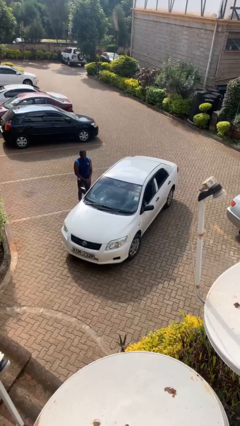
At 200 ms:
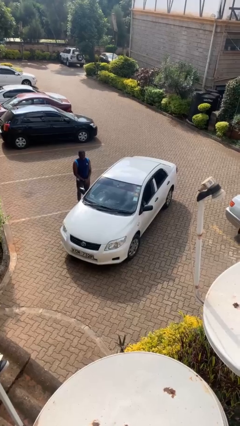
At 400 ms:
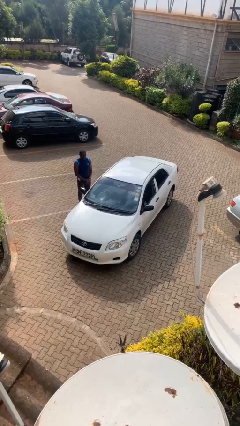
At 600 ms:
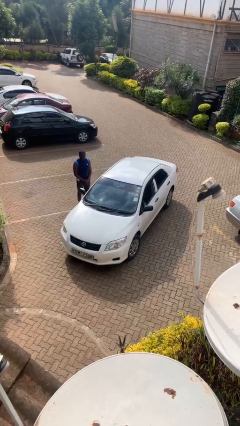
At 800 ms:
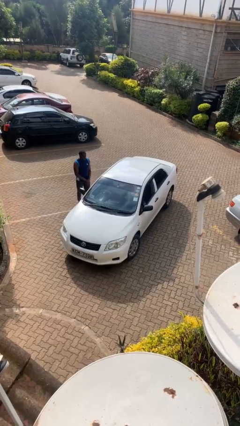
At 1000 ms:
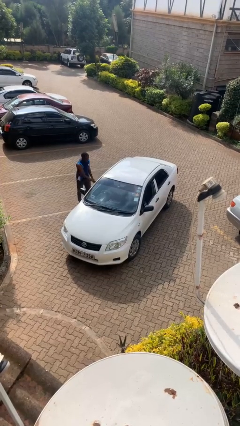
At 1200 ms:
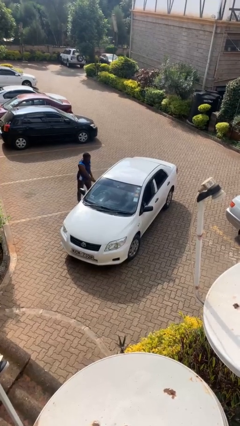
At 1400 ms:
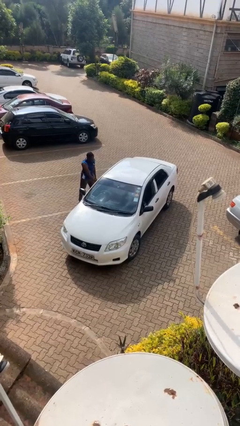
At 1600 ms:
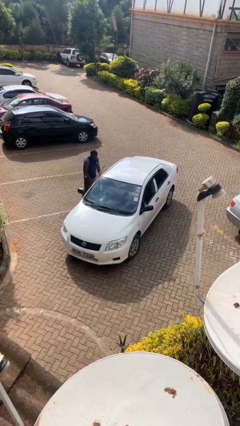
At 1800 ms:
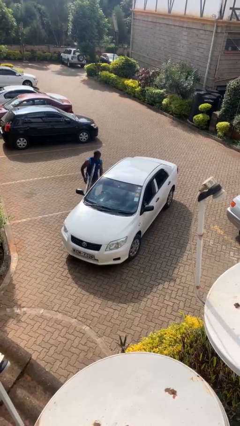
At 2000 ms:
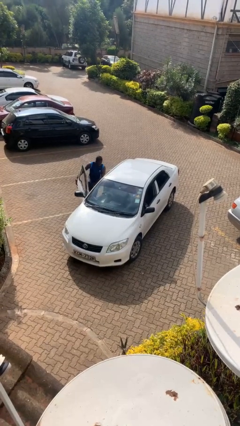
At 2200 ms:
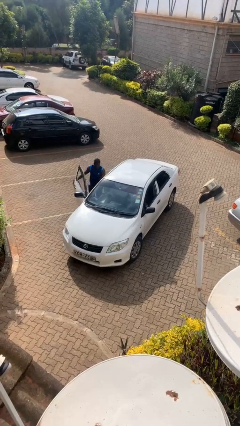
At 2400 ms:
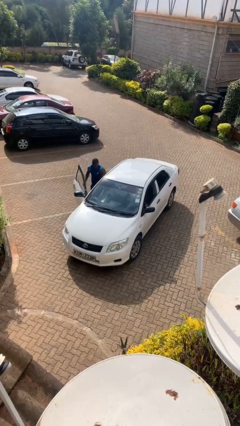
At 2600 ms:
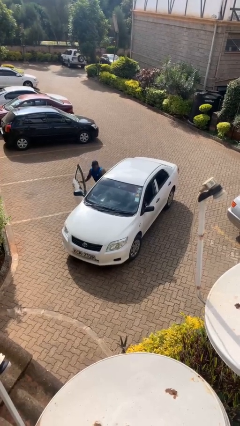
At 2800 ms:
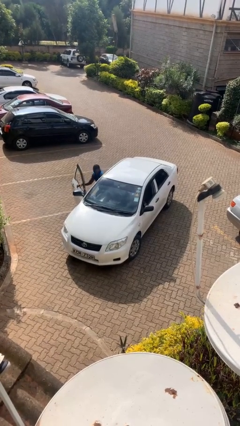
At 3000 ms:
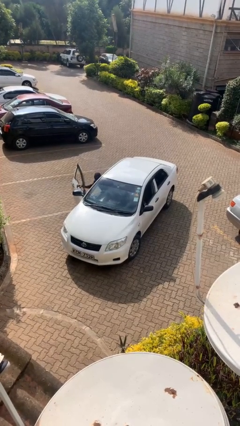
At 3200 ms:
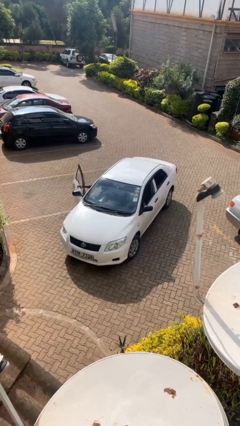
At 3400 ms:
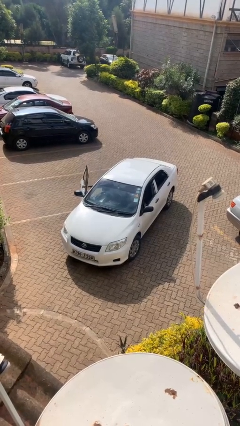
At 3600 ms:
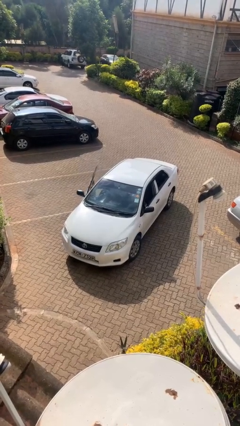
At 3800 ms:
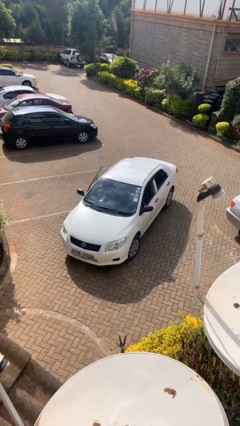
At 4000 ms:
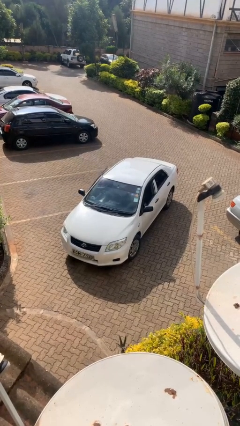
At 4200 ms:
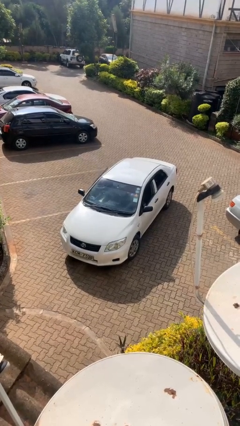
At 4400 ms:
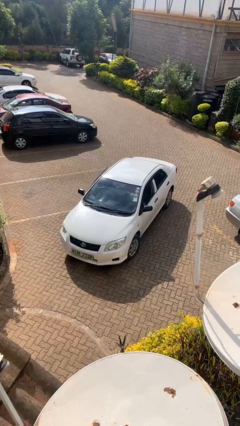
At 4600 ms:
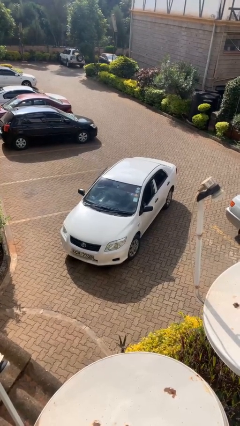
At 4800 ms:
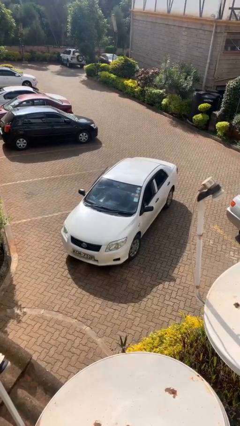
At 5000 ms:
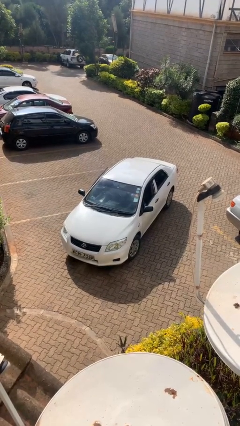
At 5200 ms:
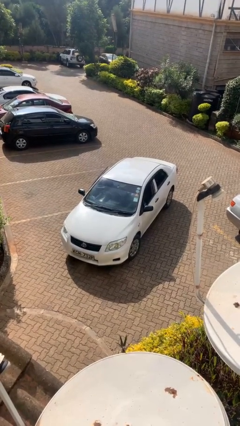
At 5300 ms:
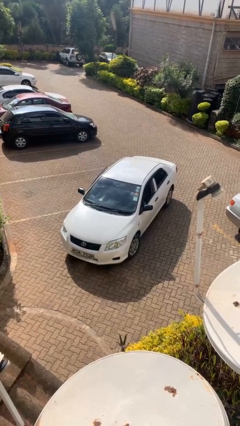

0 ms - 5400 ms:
car picks up person

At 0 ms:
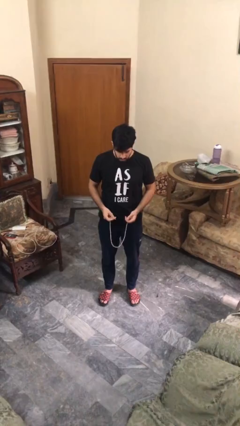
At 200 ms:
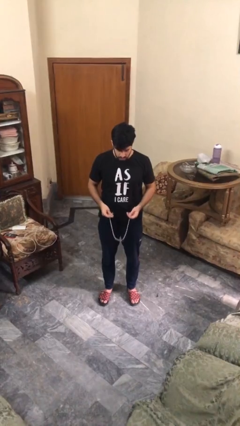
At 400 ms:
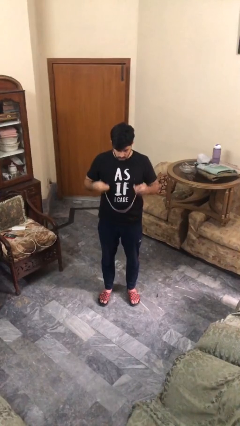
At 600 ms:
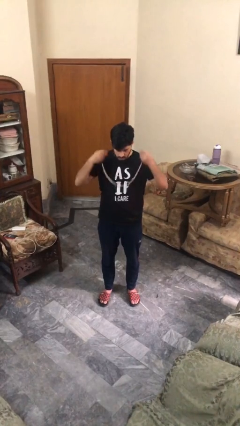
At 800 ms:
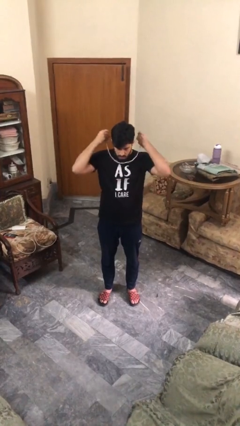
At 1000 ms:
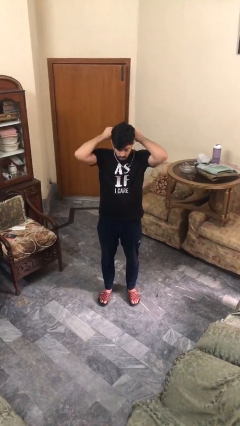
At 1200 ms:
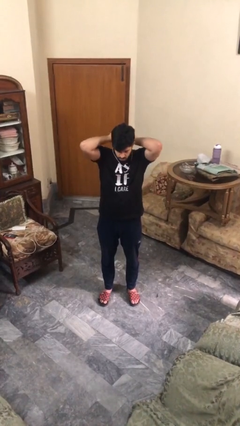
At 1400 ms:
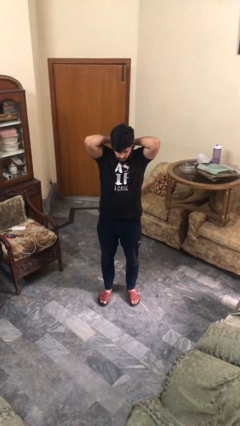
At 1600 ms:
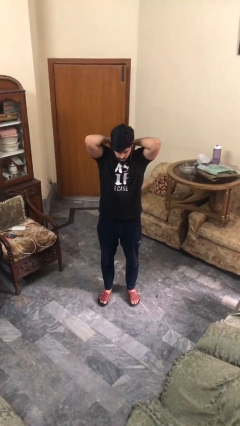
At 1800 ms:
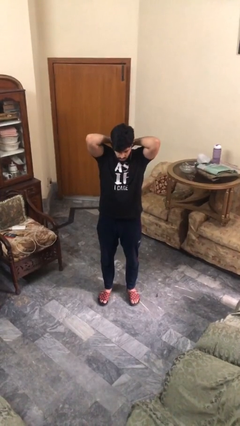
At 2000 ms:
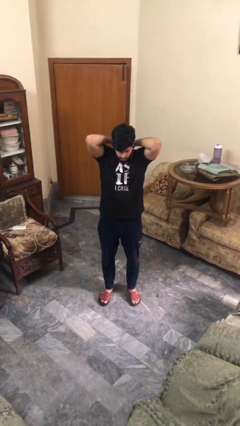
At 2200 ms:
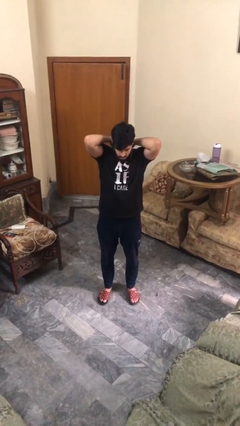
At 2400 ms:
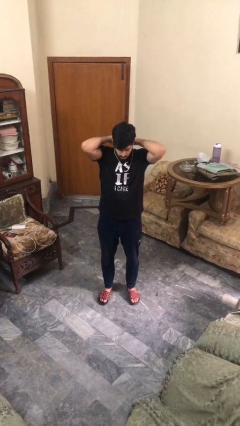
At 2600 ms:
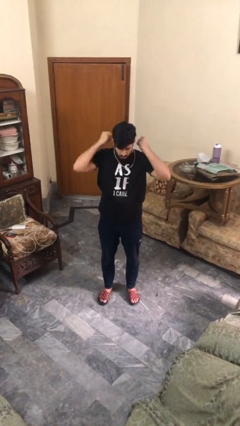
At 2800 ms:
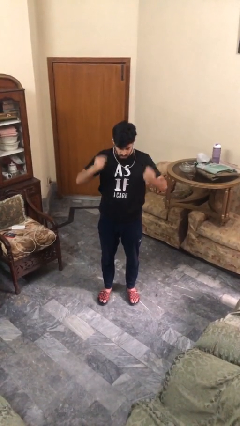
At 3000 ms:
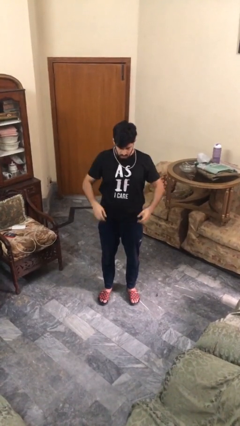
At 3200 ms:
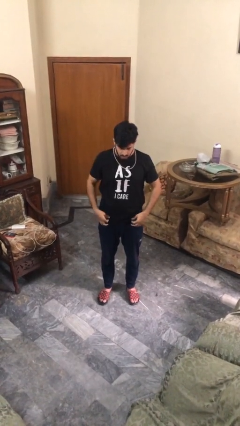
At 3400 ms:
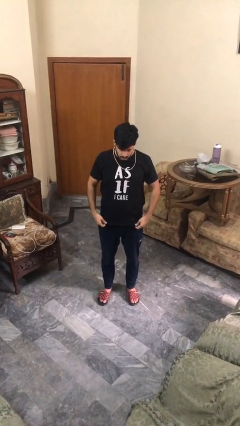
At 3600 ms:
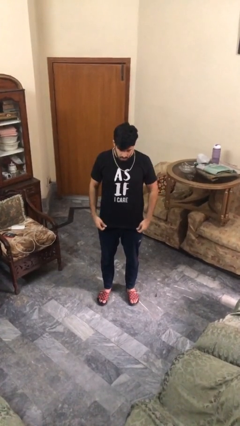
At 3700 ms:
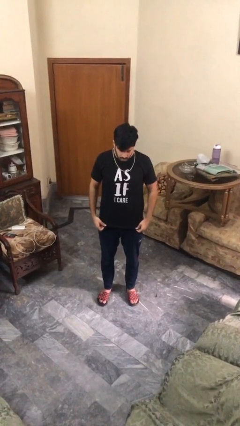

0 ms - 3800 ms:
person puts on necklace

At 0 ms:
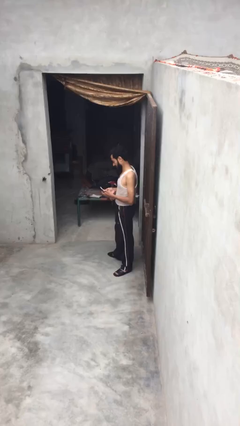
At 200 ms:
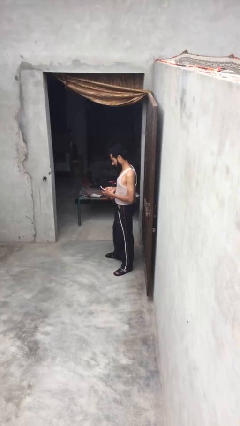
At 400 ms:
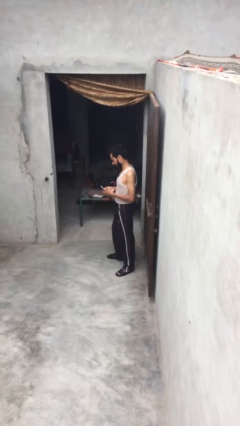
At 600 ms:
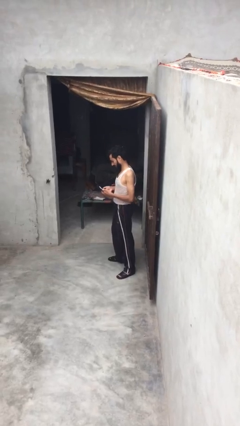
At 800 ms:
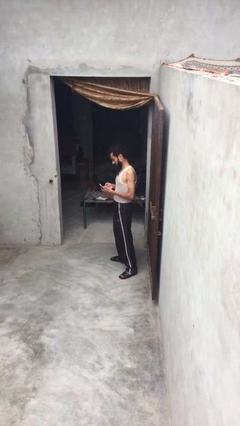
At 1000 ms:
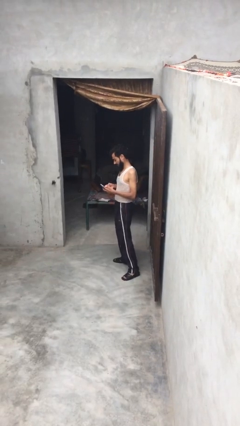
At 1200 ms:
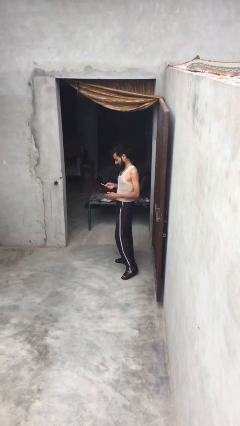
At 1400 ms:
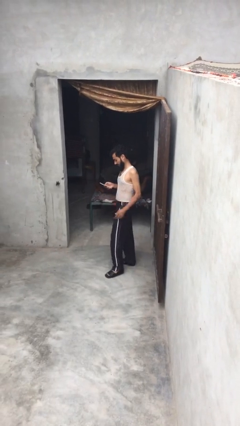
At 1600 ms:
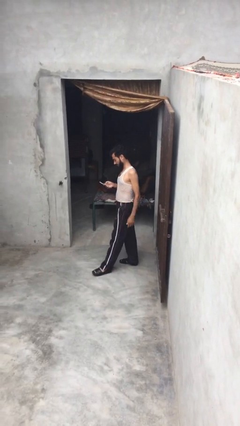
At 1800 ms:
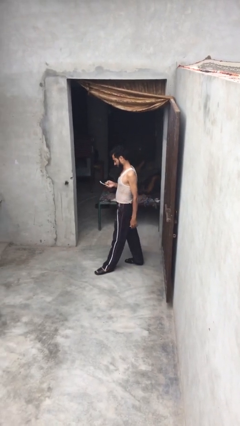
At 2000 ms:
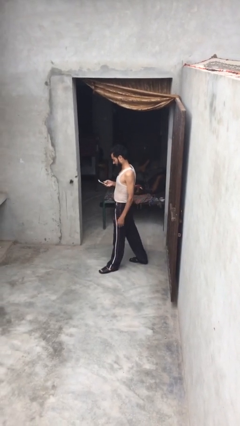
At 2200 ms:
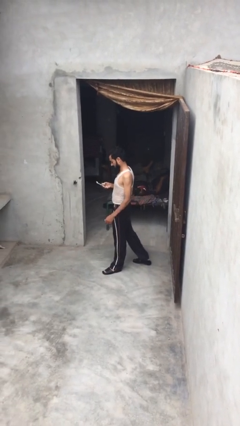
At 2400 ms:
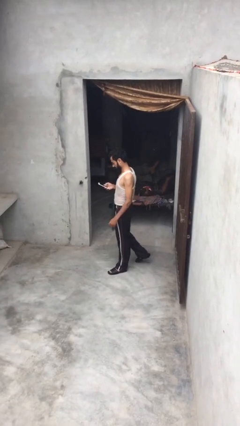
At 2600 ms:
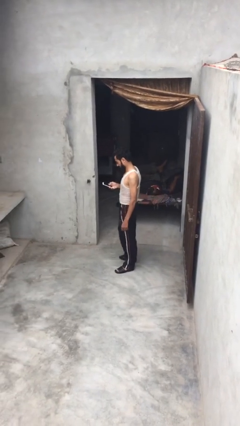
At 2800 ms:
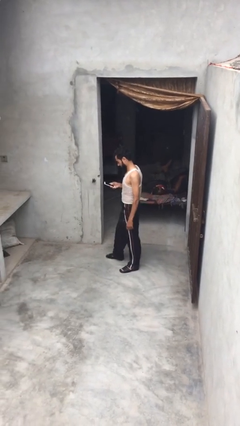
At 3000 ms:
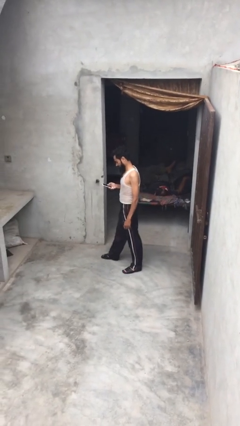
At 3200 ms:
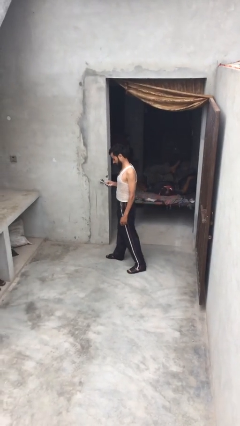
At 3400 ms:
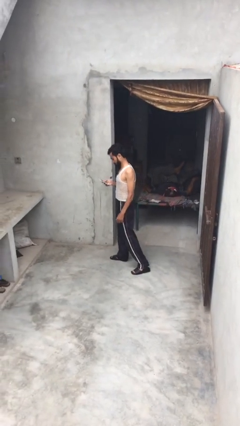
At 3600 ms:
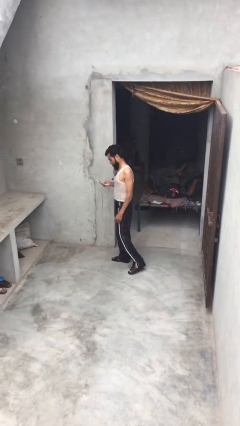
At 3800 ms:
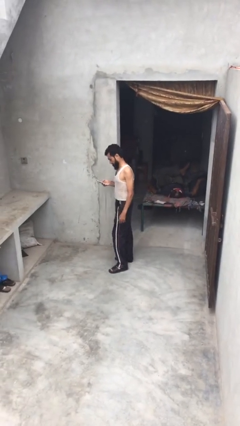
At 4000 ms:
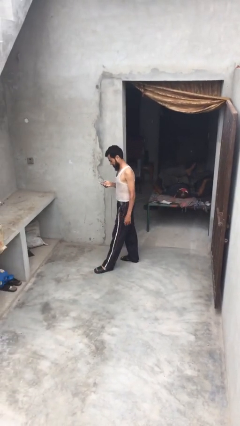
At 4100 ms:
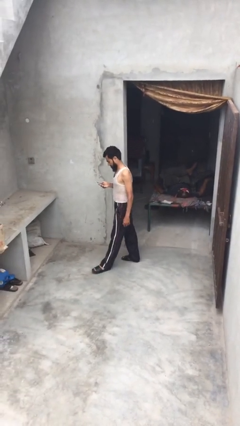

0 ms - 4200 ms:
person texts on phone

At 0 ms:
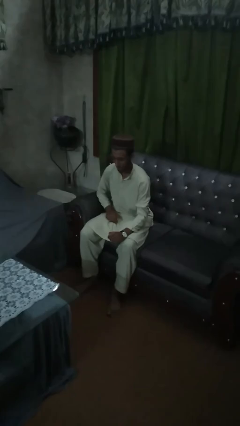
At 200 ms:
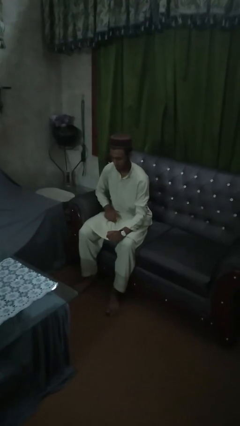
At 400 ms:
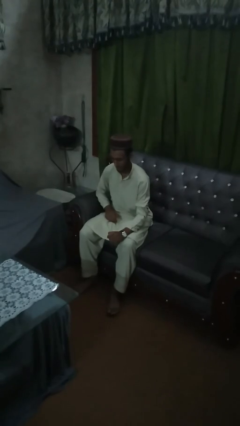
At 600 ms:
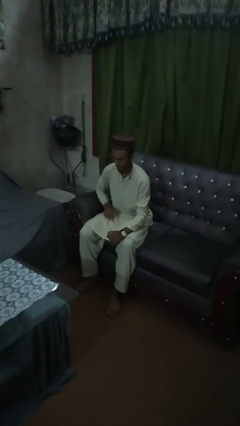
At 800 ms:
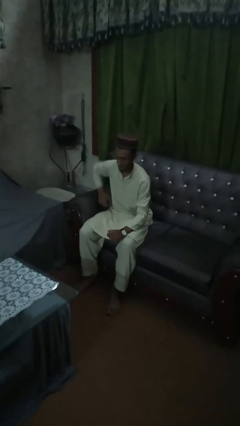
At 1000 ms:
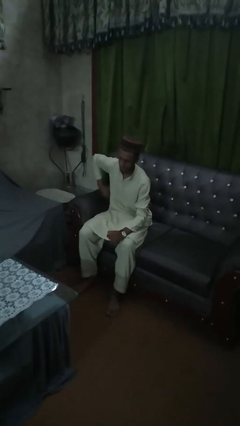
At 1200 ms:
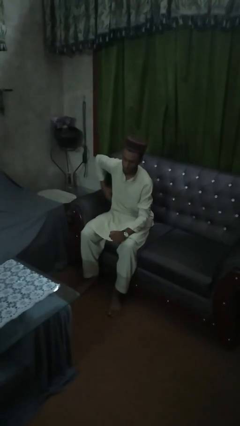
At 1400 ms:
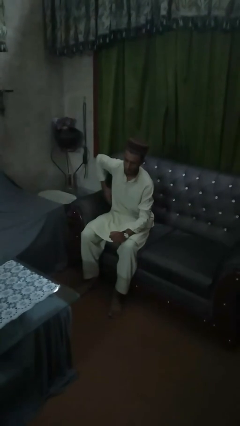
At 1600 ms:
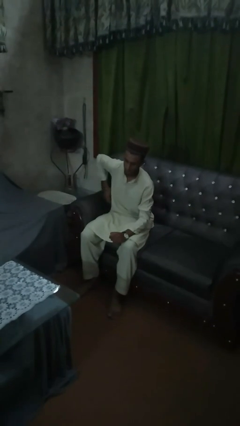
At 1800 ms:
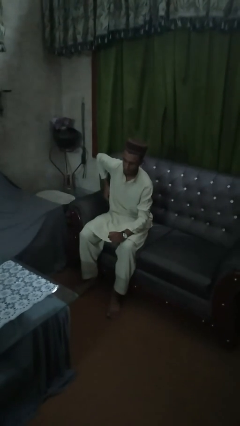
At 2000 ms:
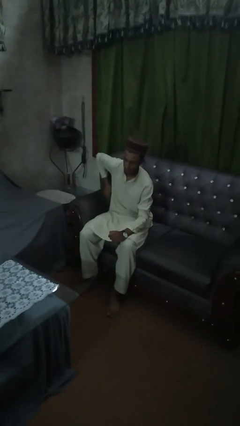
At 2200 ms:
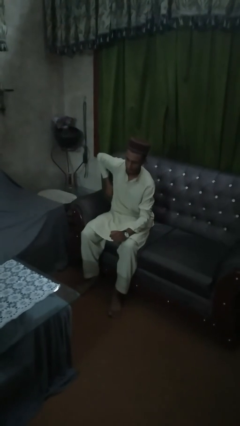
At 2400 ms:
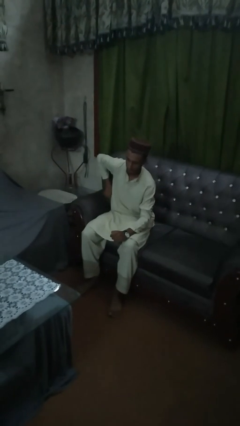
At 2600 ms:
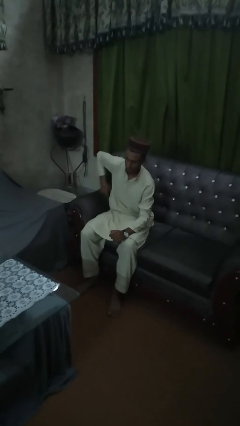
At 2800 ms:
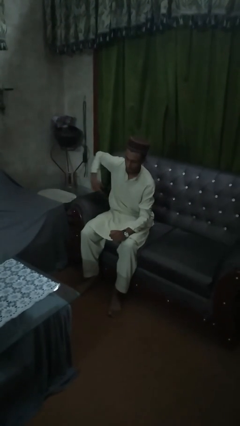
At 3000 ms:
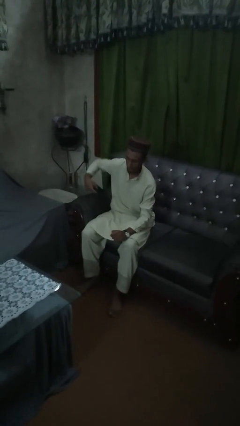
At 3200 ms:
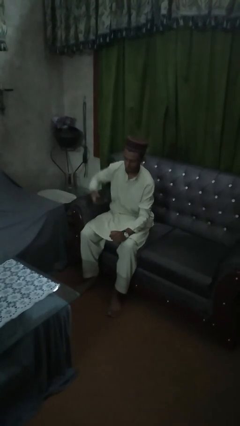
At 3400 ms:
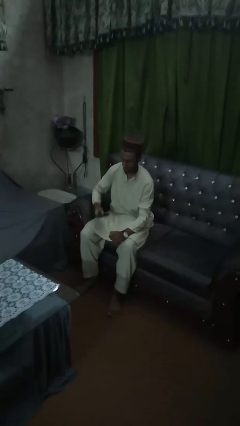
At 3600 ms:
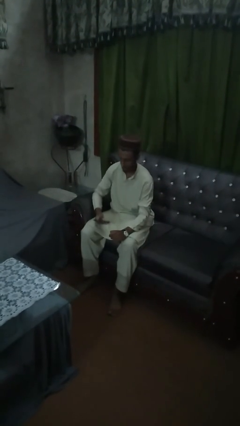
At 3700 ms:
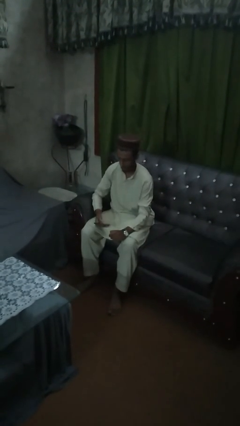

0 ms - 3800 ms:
person takes phone from pocket

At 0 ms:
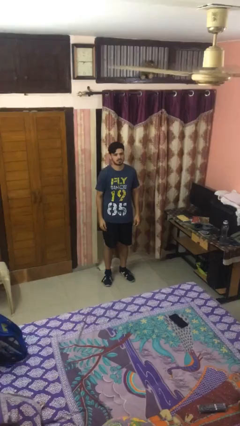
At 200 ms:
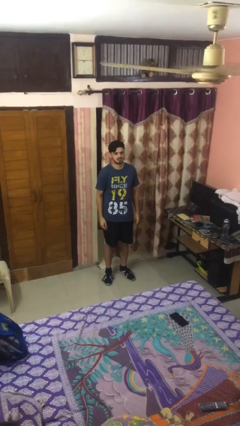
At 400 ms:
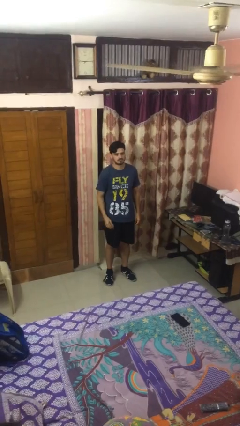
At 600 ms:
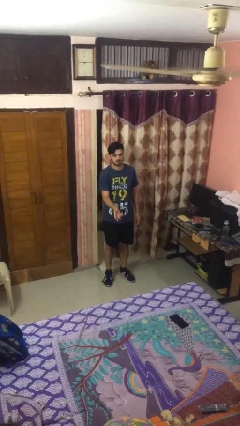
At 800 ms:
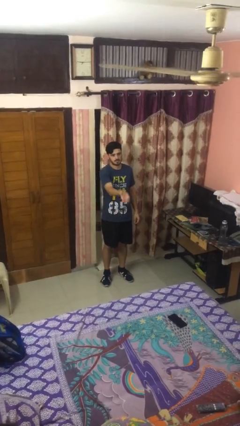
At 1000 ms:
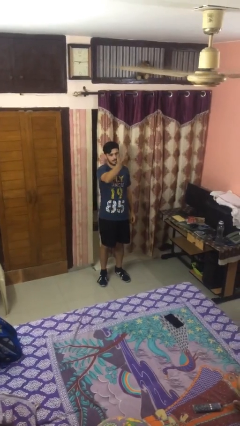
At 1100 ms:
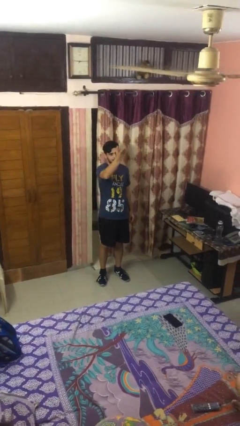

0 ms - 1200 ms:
person gestures swipe up
